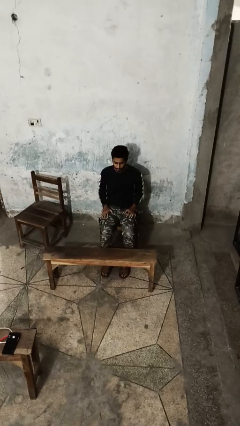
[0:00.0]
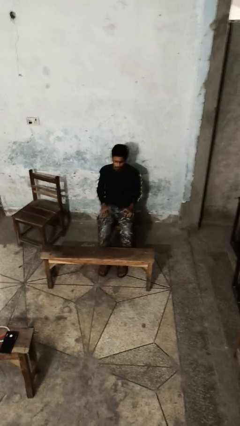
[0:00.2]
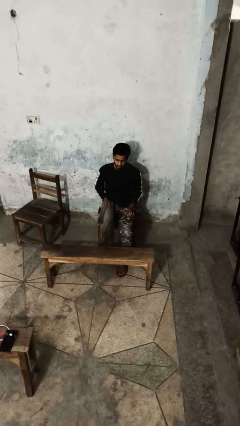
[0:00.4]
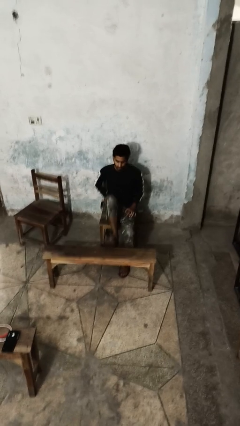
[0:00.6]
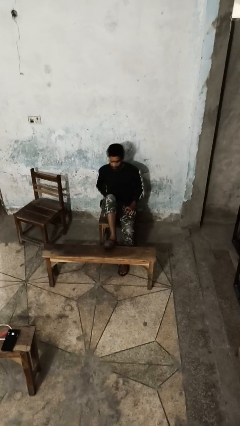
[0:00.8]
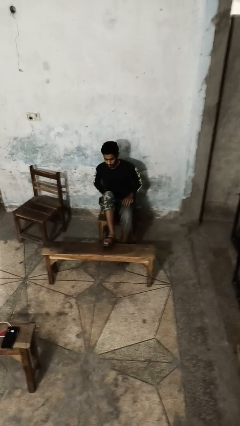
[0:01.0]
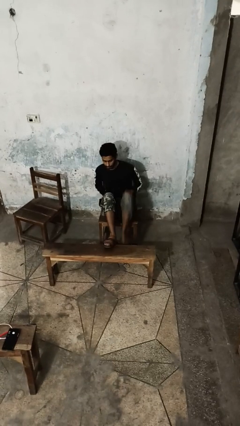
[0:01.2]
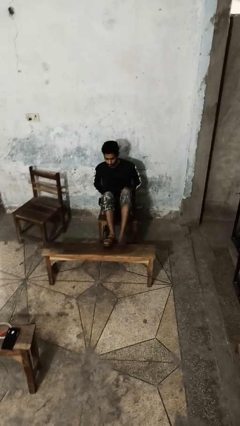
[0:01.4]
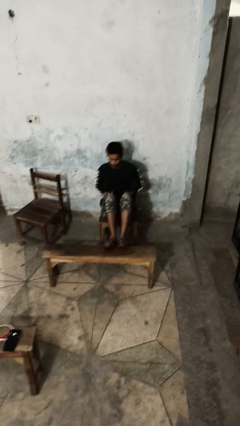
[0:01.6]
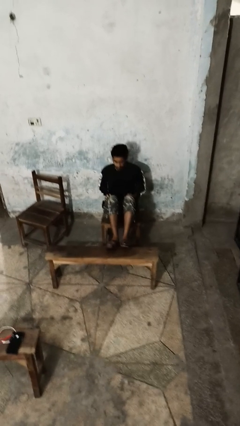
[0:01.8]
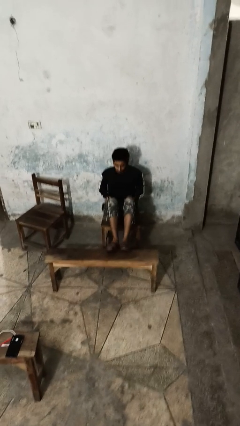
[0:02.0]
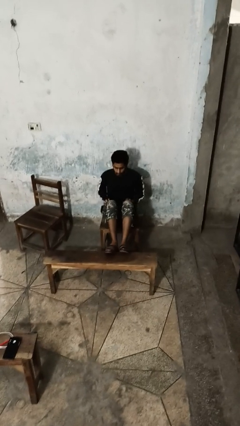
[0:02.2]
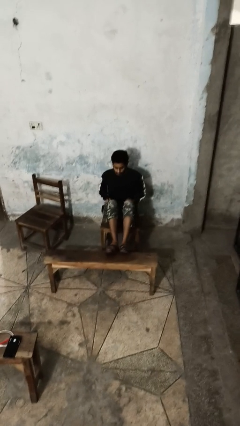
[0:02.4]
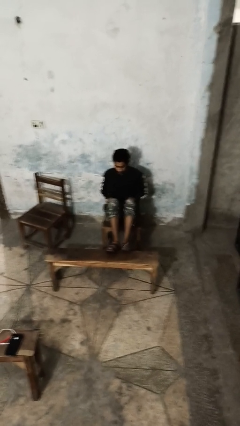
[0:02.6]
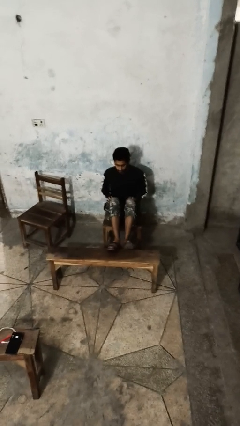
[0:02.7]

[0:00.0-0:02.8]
person puts feet up

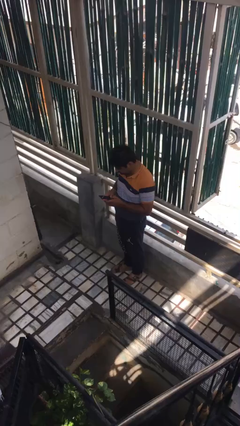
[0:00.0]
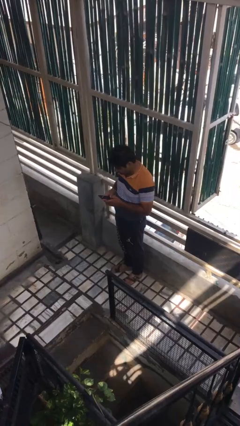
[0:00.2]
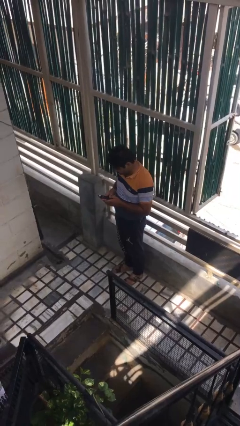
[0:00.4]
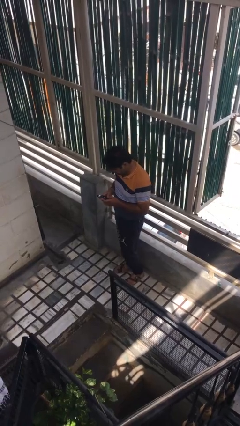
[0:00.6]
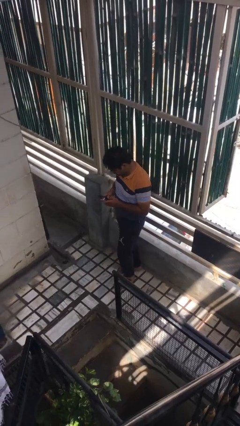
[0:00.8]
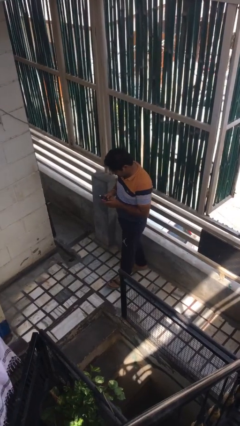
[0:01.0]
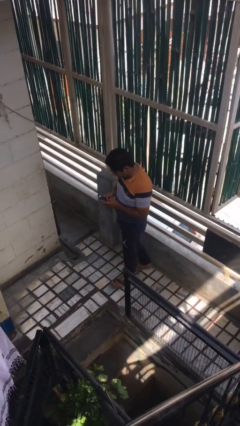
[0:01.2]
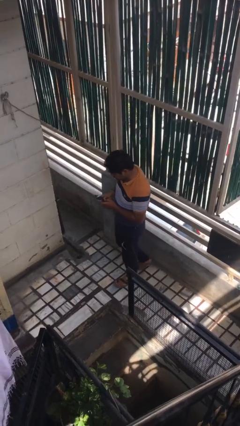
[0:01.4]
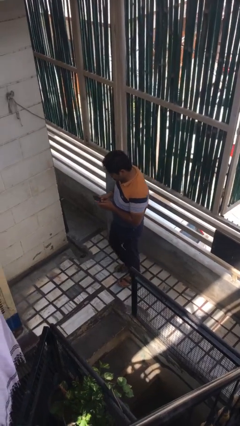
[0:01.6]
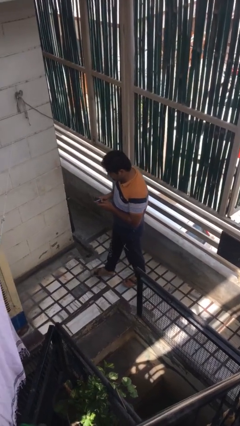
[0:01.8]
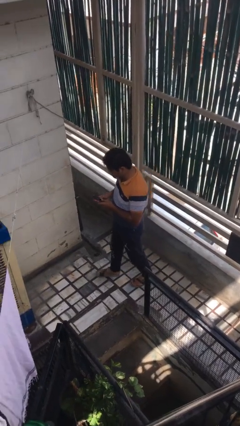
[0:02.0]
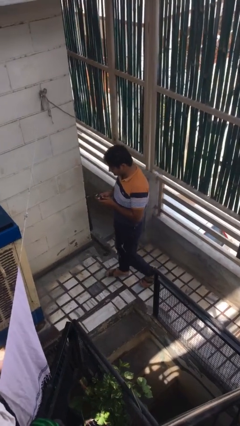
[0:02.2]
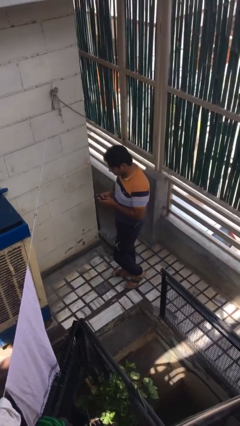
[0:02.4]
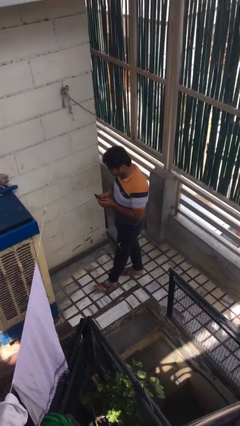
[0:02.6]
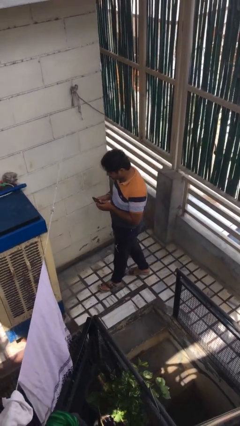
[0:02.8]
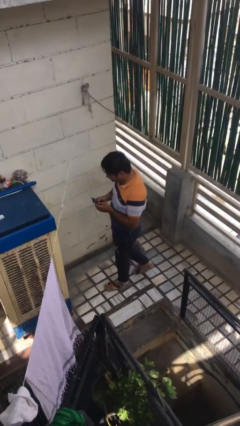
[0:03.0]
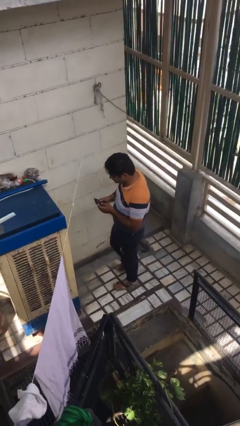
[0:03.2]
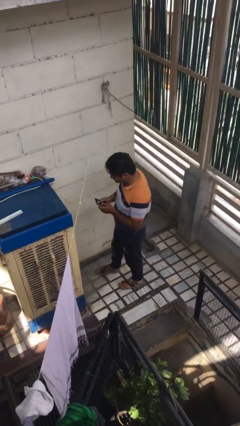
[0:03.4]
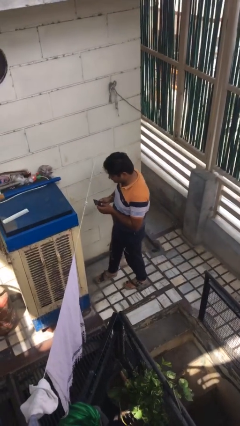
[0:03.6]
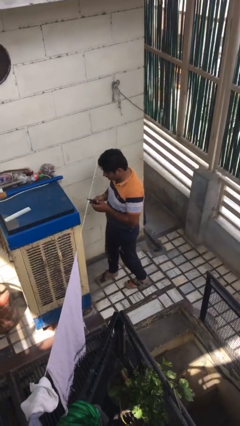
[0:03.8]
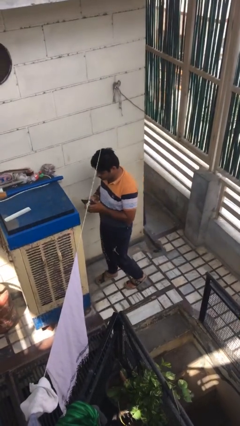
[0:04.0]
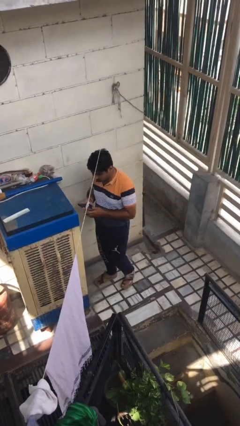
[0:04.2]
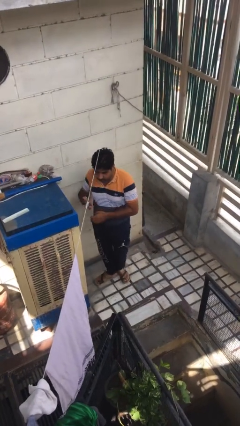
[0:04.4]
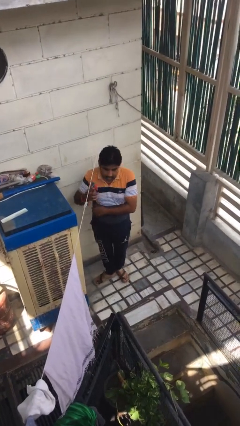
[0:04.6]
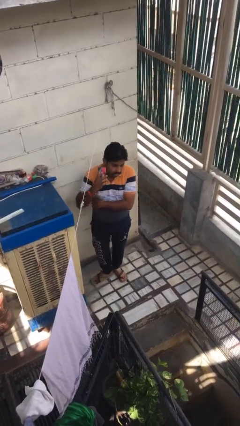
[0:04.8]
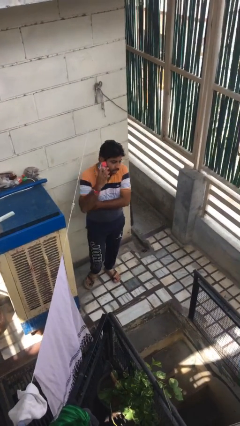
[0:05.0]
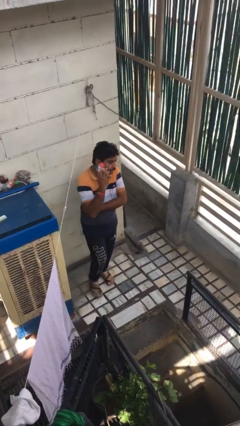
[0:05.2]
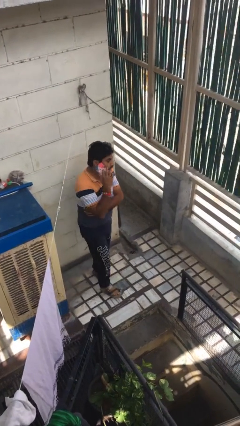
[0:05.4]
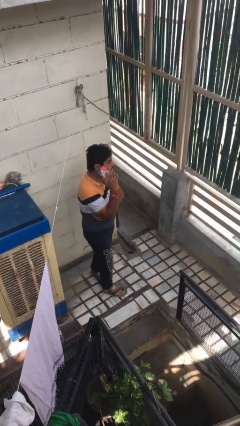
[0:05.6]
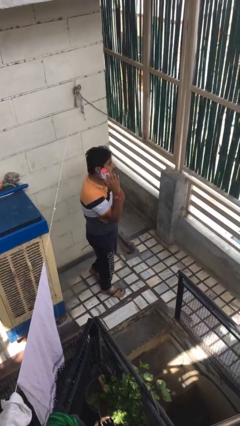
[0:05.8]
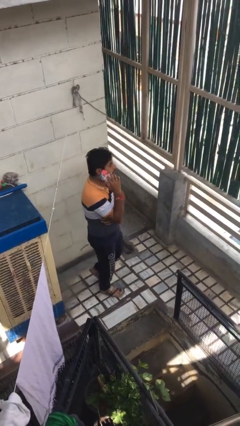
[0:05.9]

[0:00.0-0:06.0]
person texts on phone

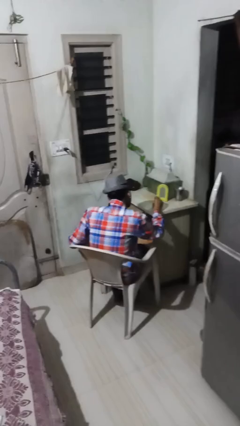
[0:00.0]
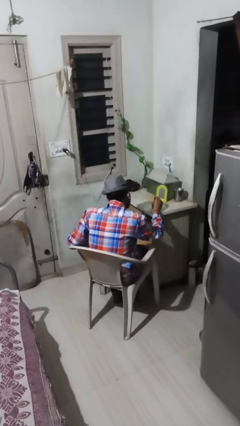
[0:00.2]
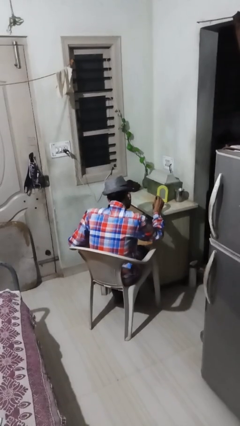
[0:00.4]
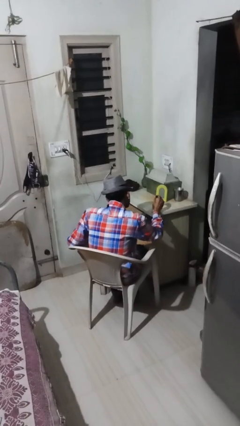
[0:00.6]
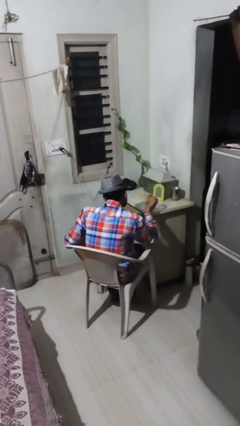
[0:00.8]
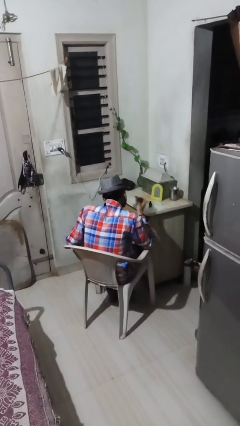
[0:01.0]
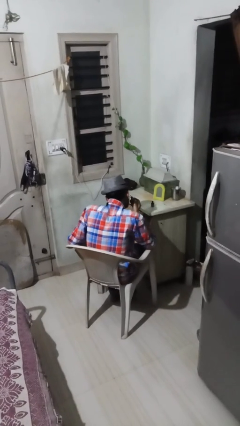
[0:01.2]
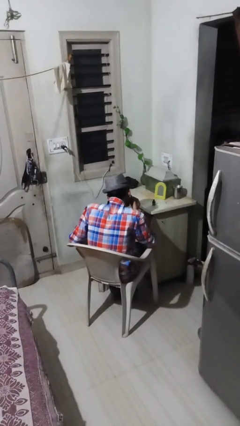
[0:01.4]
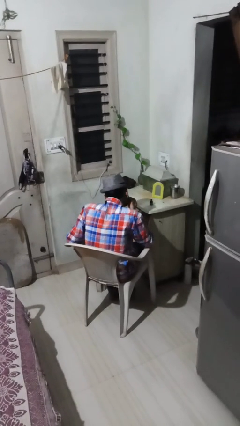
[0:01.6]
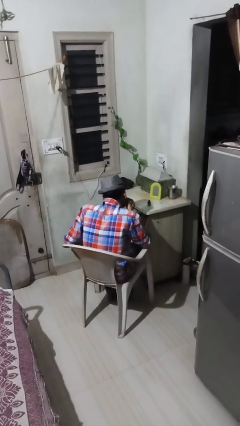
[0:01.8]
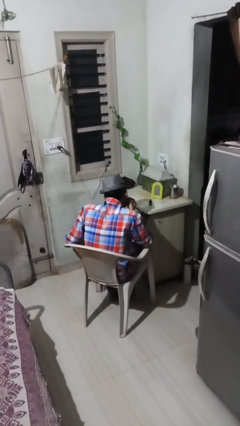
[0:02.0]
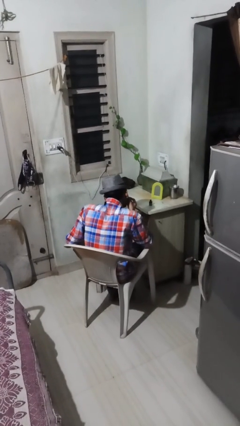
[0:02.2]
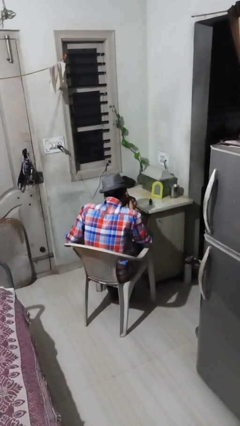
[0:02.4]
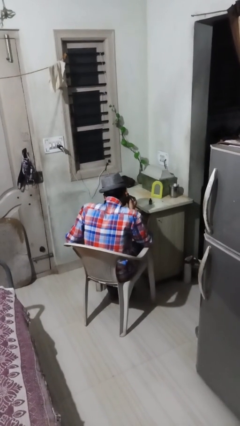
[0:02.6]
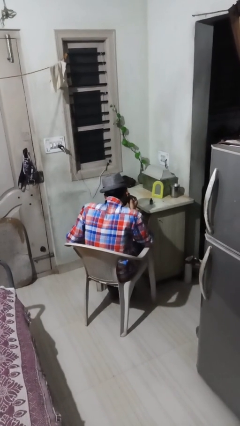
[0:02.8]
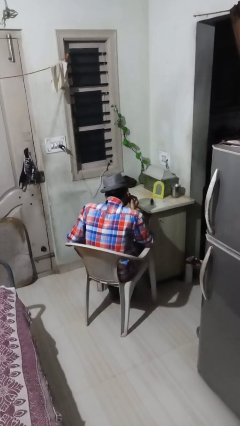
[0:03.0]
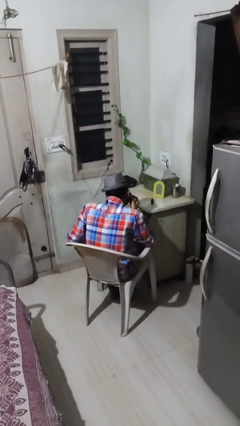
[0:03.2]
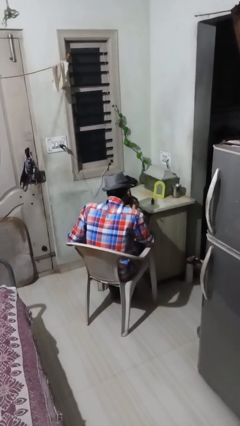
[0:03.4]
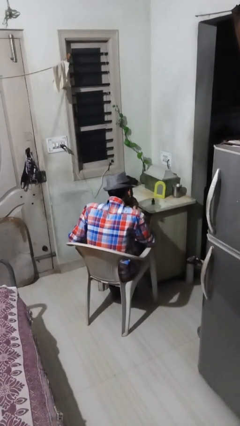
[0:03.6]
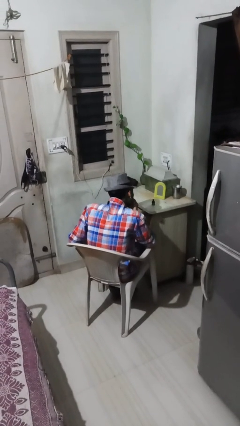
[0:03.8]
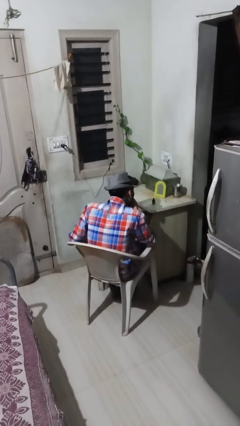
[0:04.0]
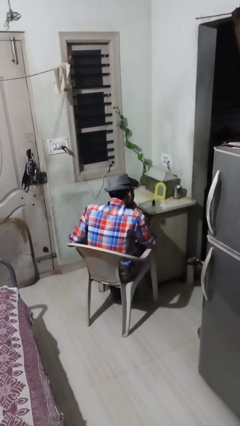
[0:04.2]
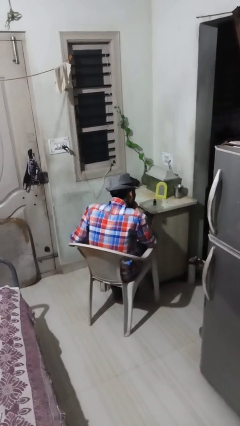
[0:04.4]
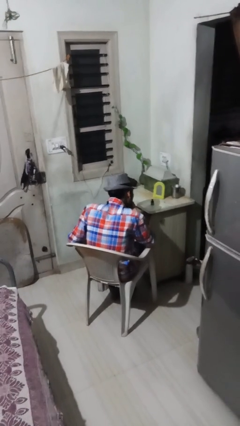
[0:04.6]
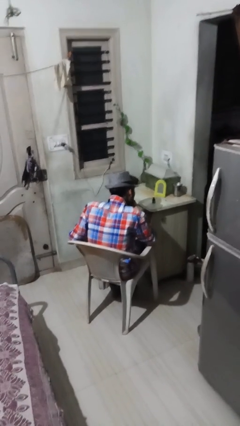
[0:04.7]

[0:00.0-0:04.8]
person applies eye makeup

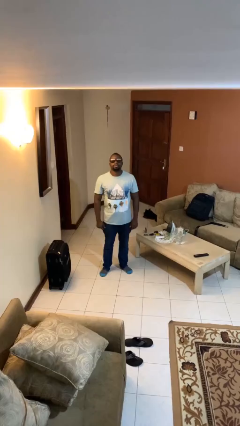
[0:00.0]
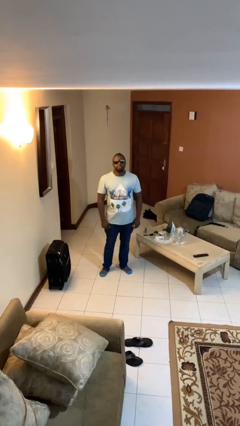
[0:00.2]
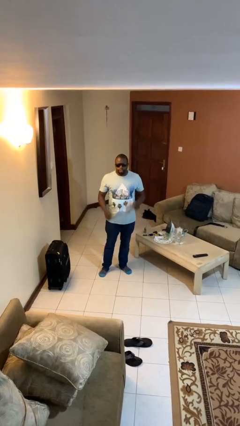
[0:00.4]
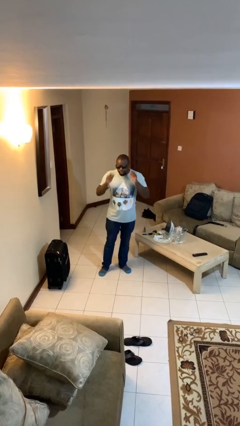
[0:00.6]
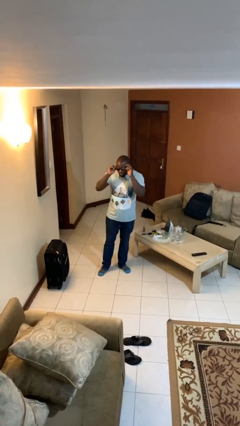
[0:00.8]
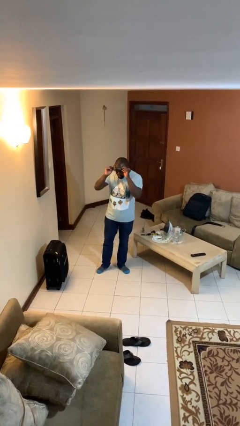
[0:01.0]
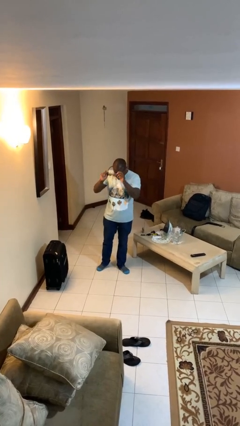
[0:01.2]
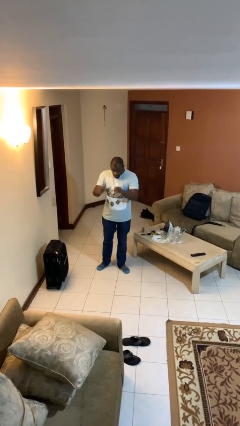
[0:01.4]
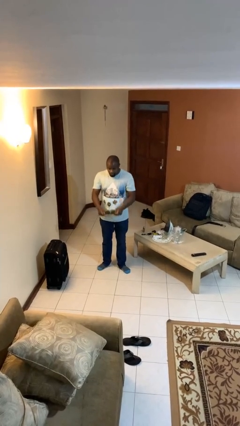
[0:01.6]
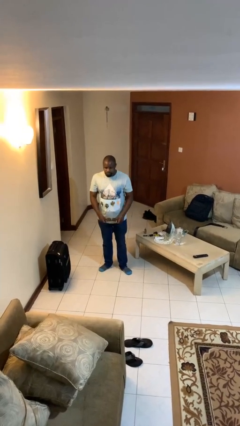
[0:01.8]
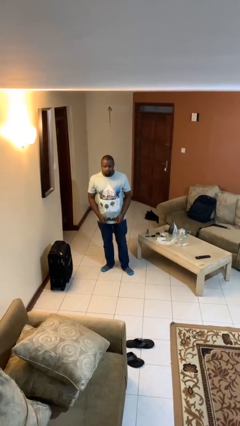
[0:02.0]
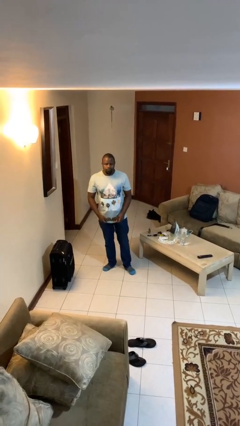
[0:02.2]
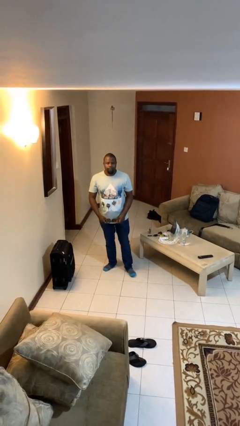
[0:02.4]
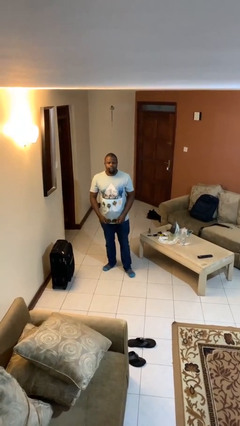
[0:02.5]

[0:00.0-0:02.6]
person takes off sunglasses

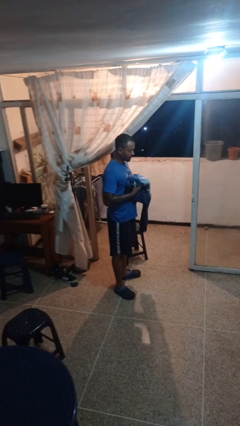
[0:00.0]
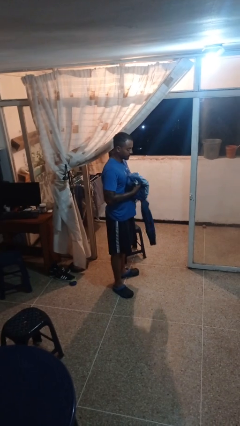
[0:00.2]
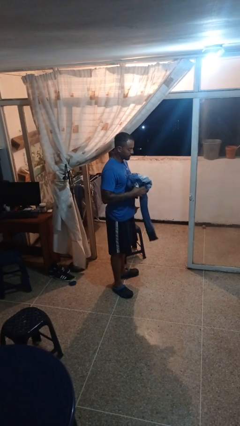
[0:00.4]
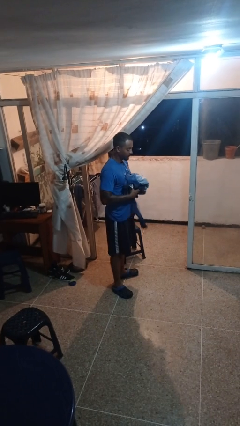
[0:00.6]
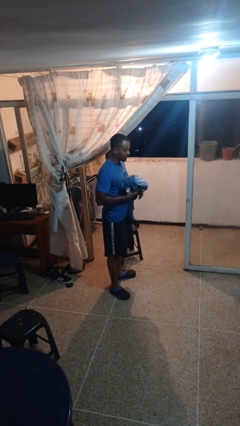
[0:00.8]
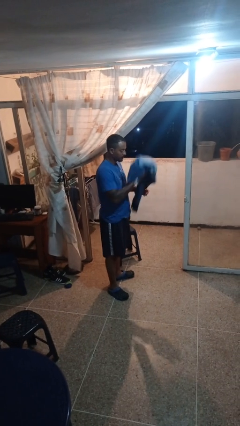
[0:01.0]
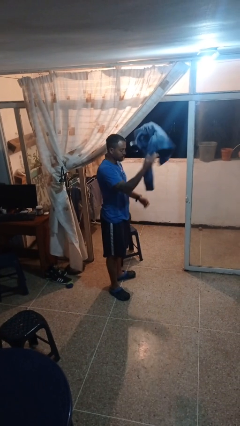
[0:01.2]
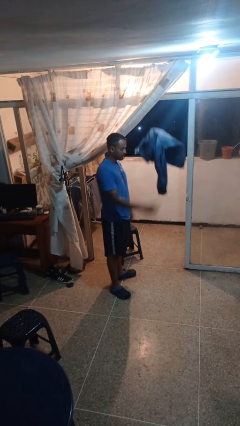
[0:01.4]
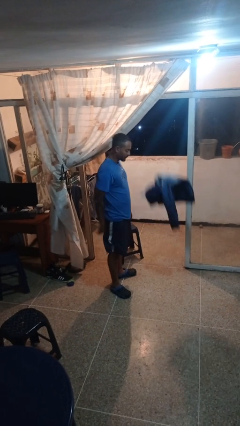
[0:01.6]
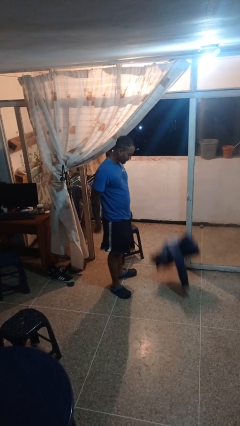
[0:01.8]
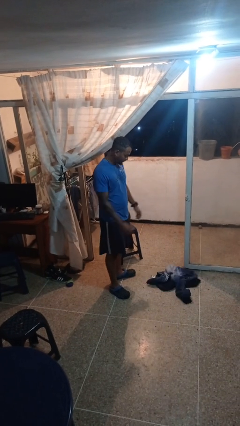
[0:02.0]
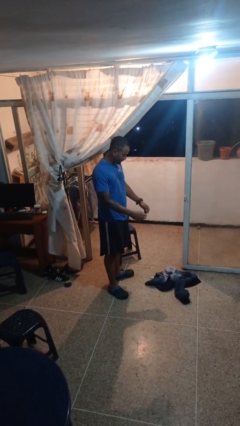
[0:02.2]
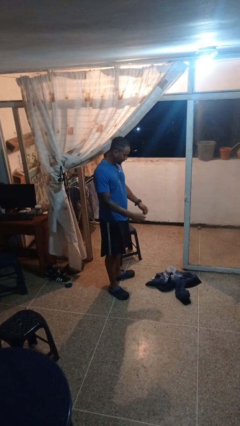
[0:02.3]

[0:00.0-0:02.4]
person throws object into air
